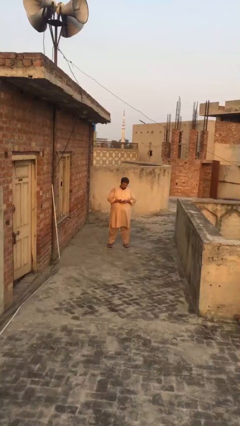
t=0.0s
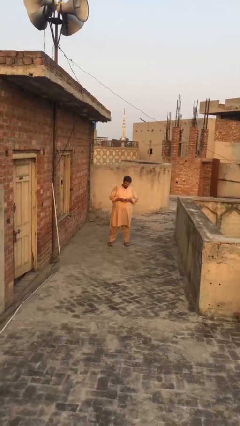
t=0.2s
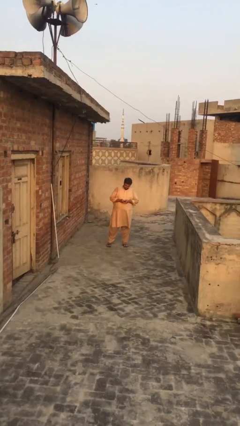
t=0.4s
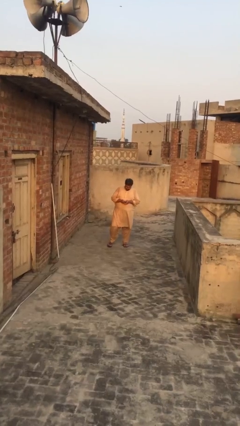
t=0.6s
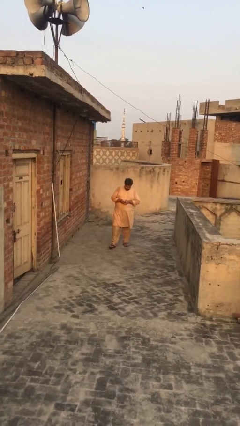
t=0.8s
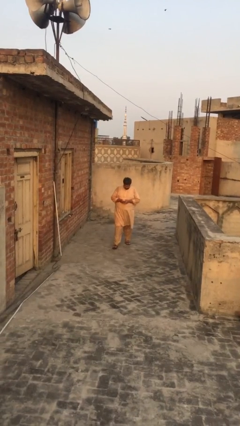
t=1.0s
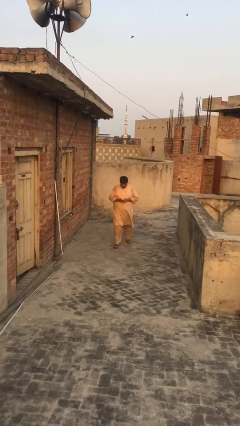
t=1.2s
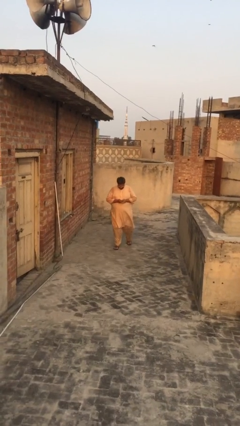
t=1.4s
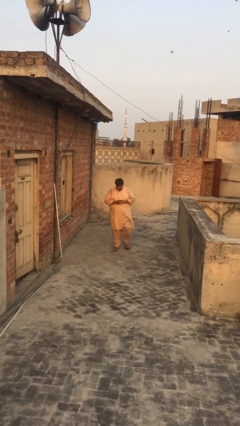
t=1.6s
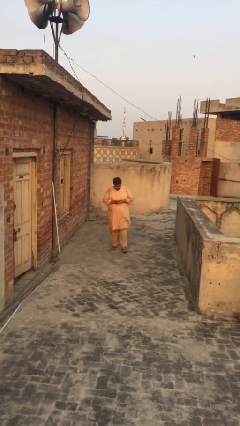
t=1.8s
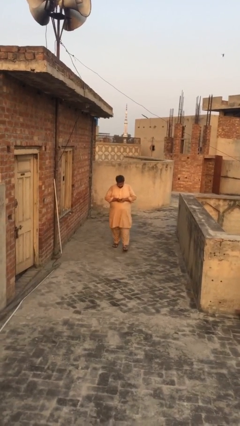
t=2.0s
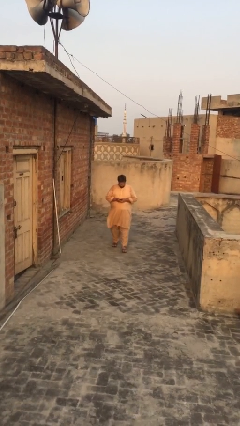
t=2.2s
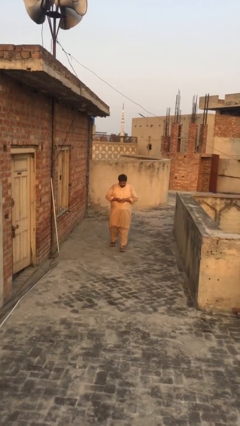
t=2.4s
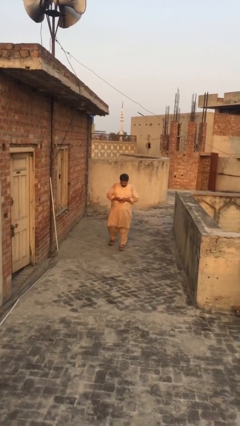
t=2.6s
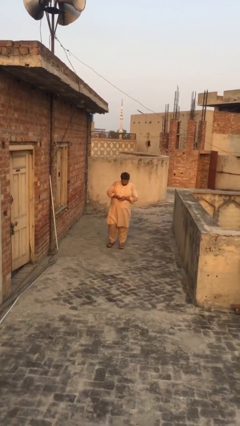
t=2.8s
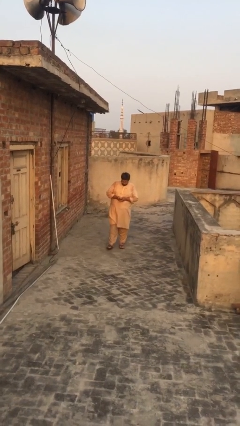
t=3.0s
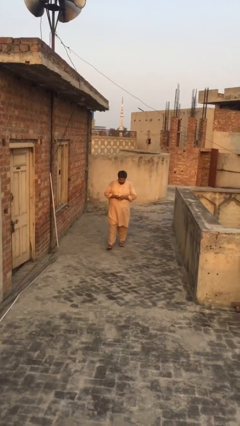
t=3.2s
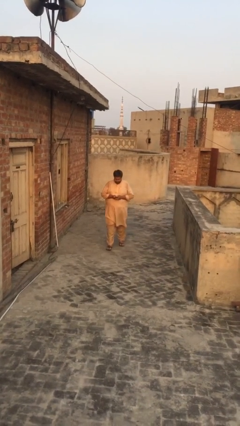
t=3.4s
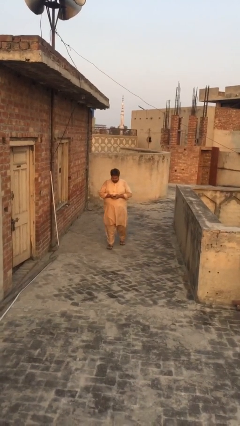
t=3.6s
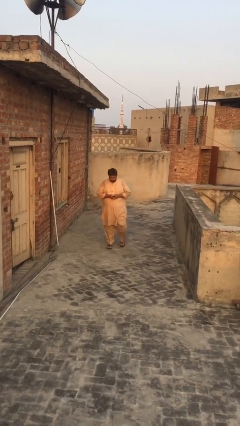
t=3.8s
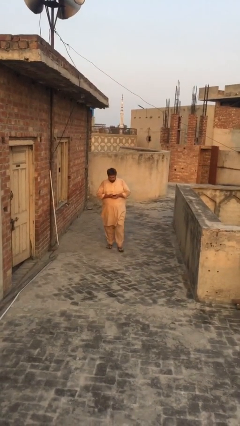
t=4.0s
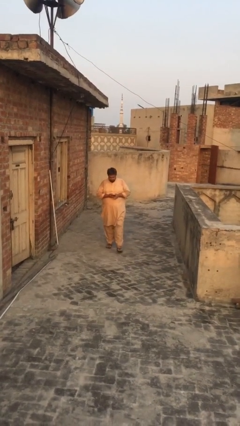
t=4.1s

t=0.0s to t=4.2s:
person texts on phone

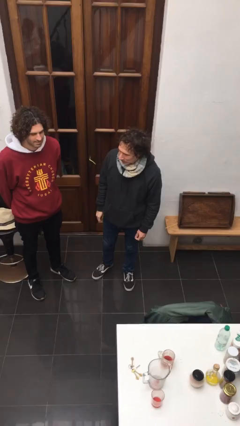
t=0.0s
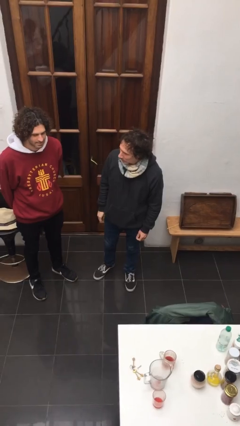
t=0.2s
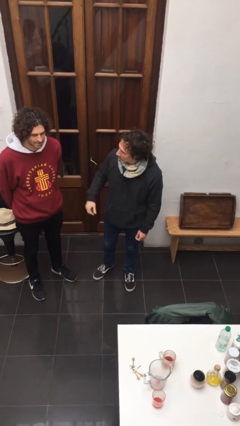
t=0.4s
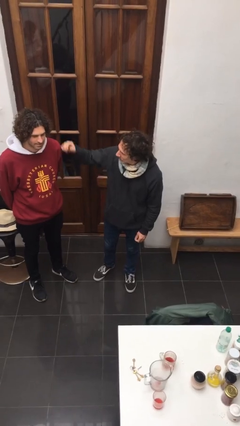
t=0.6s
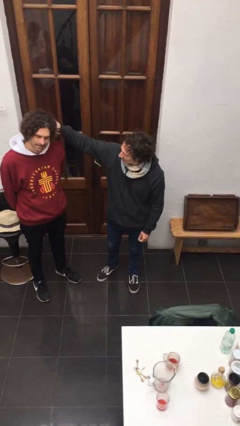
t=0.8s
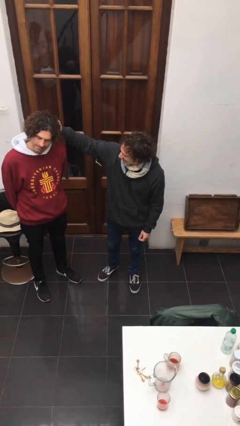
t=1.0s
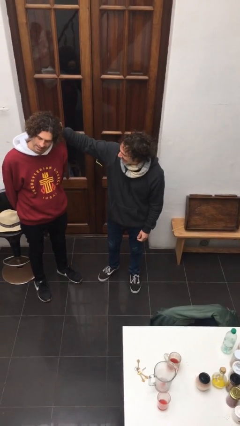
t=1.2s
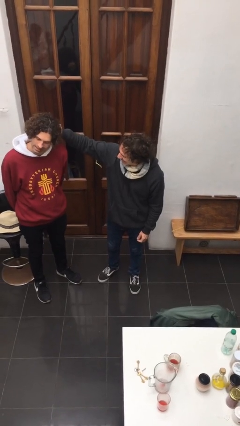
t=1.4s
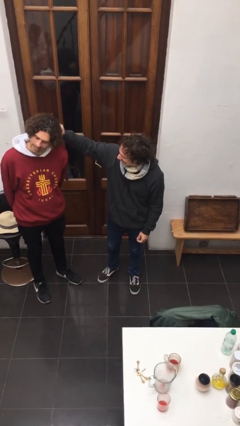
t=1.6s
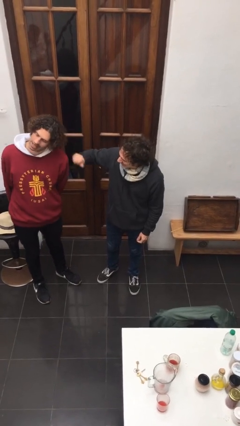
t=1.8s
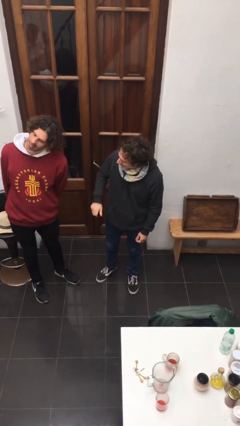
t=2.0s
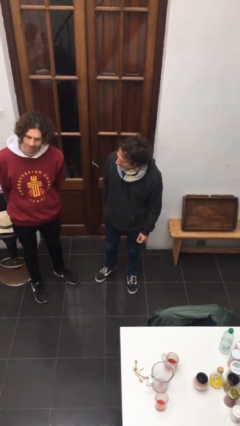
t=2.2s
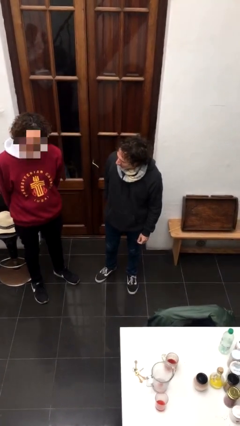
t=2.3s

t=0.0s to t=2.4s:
person grabs person by hair

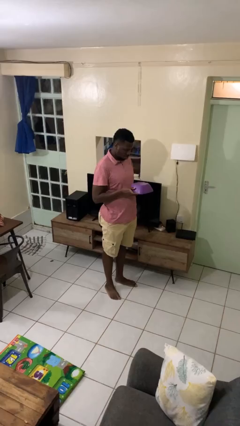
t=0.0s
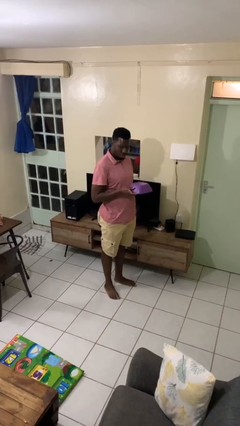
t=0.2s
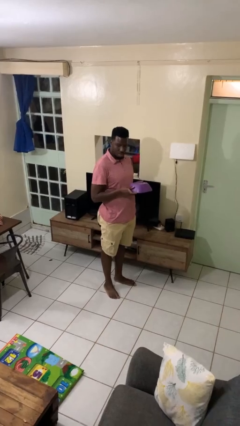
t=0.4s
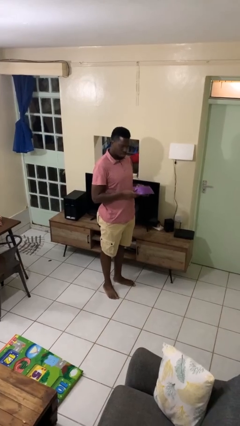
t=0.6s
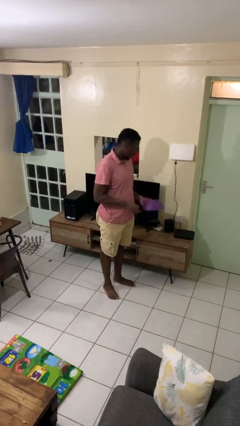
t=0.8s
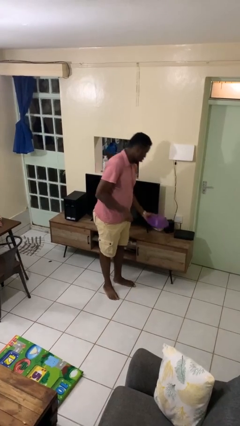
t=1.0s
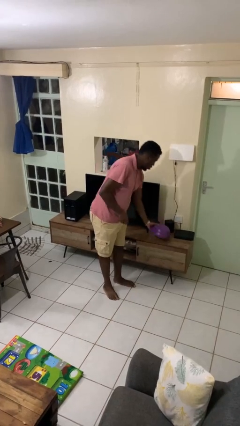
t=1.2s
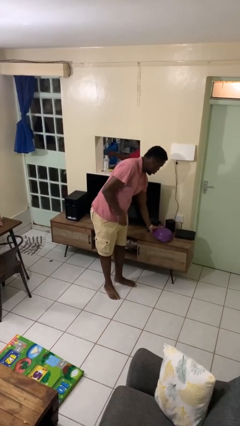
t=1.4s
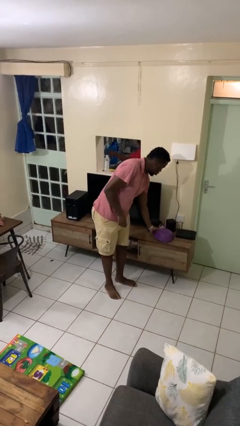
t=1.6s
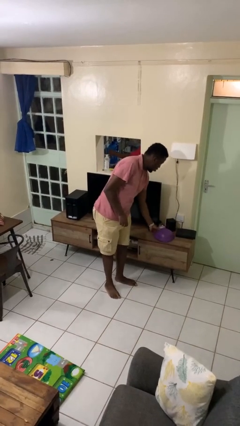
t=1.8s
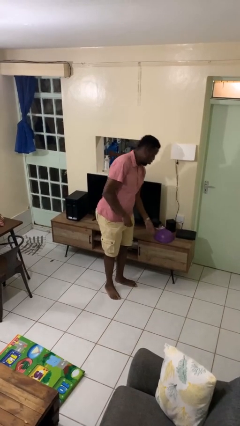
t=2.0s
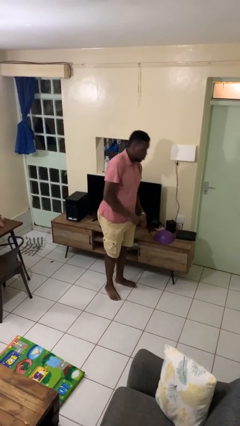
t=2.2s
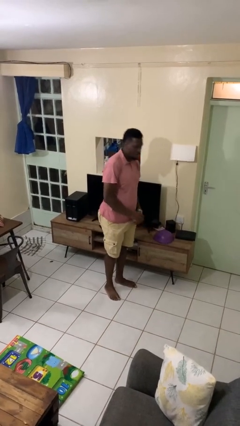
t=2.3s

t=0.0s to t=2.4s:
person puts down object on countertop

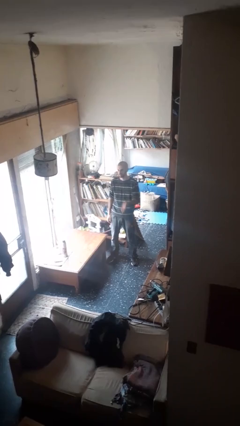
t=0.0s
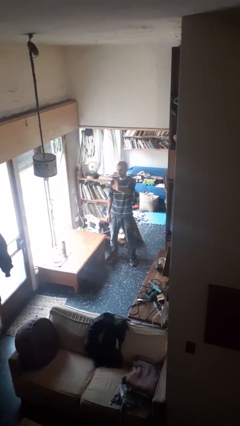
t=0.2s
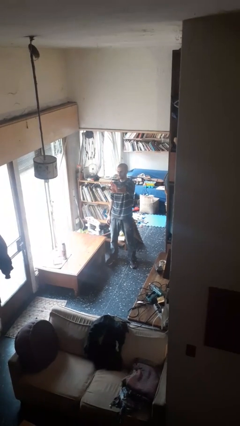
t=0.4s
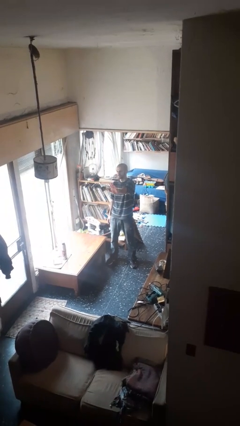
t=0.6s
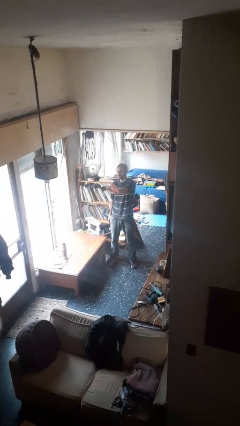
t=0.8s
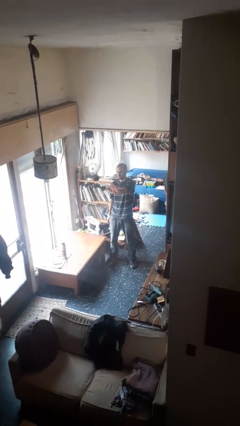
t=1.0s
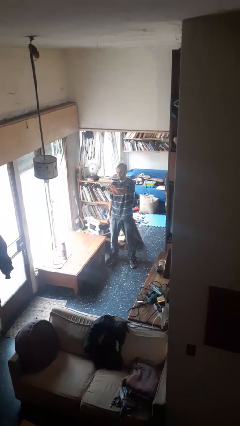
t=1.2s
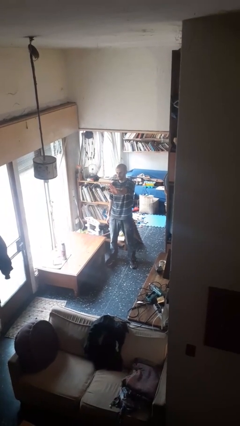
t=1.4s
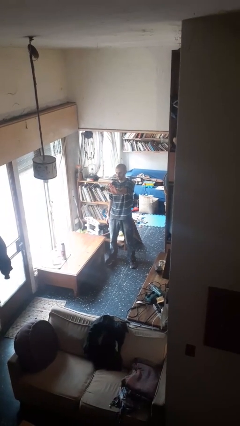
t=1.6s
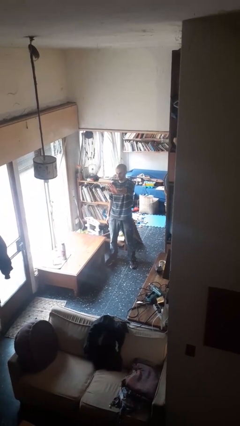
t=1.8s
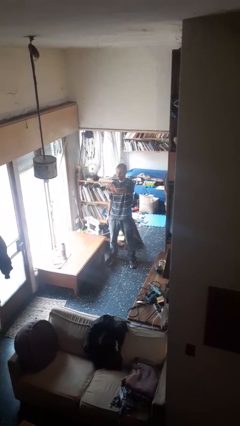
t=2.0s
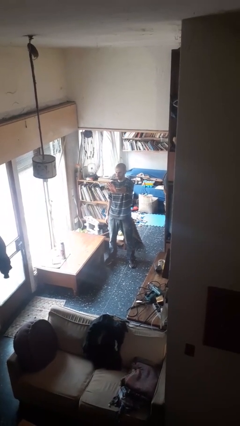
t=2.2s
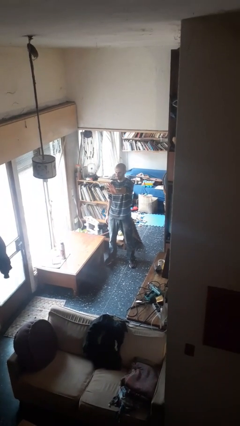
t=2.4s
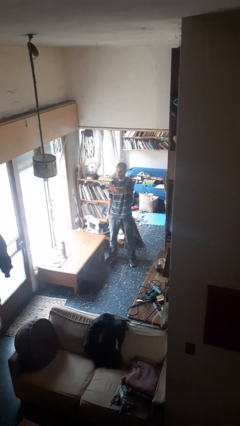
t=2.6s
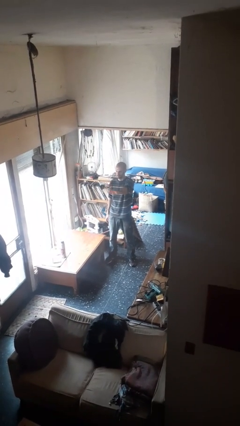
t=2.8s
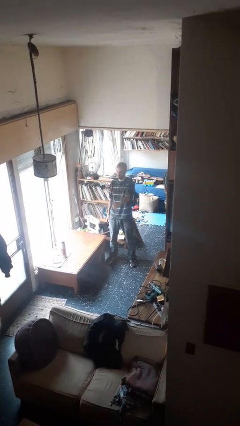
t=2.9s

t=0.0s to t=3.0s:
person gestures stop

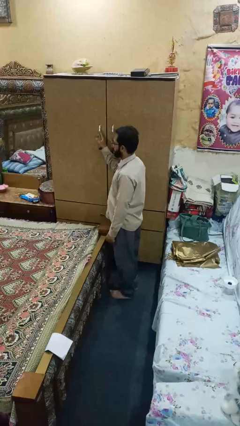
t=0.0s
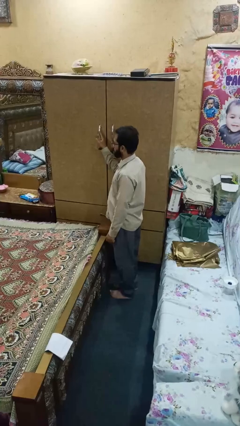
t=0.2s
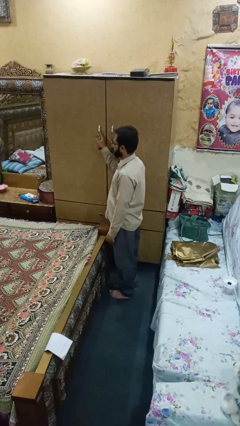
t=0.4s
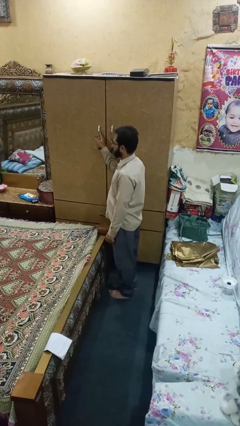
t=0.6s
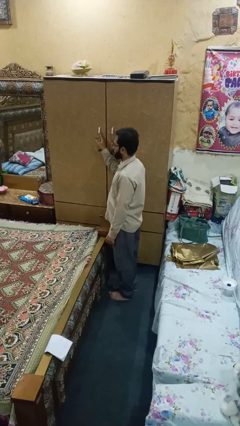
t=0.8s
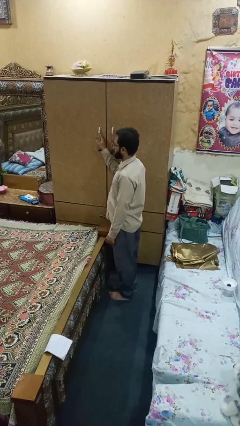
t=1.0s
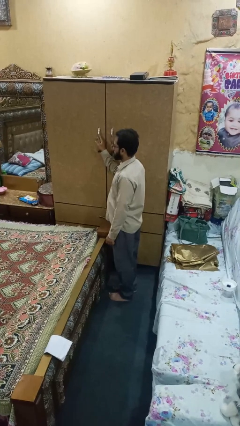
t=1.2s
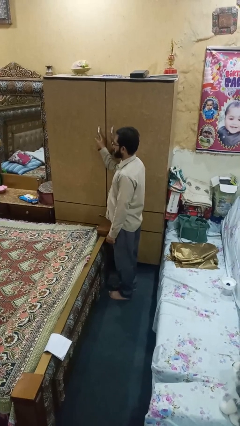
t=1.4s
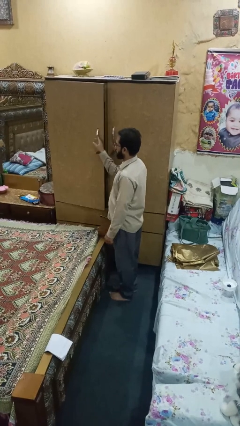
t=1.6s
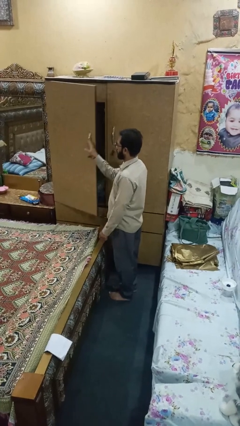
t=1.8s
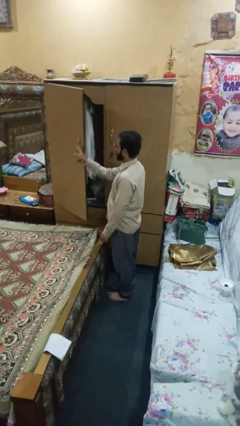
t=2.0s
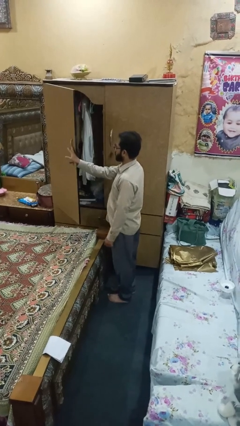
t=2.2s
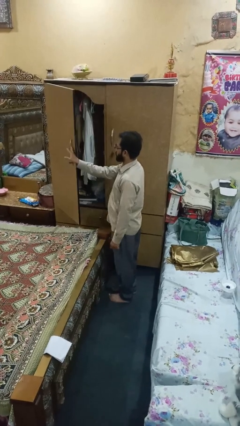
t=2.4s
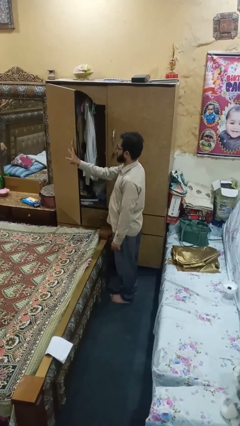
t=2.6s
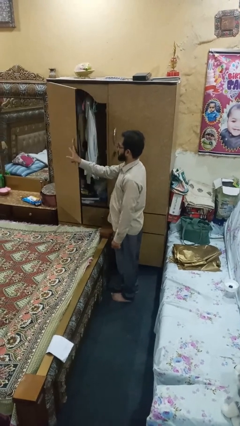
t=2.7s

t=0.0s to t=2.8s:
person opens closet door

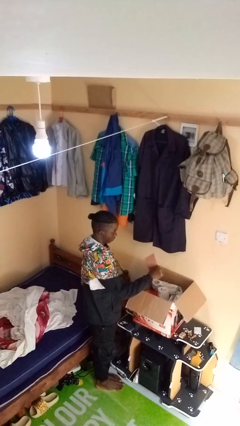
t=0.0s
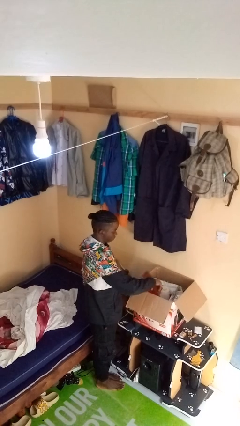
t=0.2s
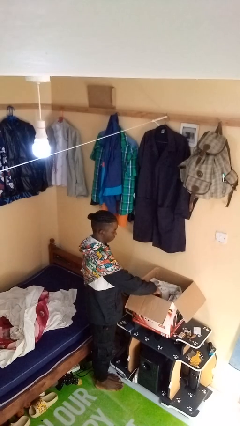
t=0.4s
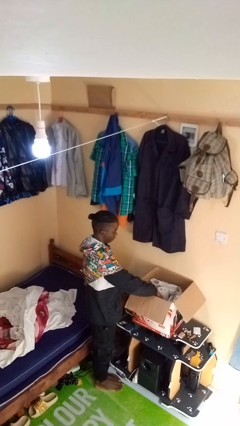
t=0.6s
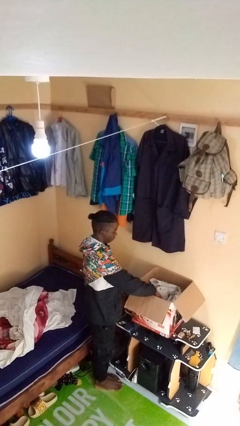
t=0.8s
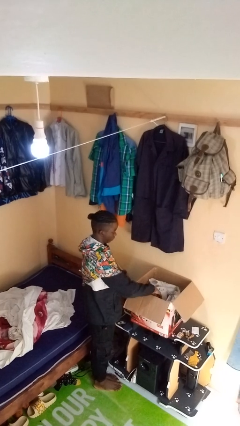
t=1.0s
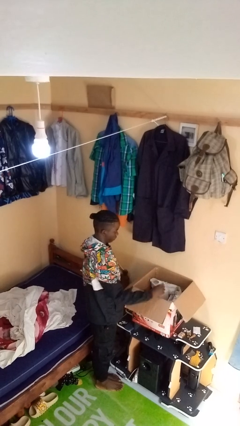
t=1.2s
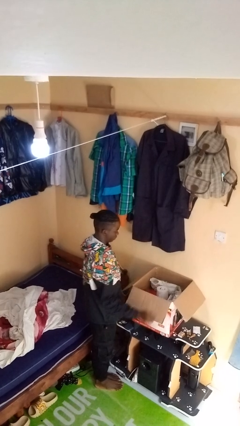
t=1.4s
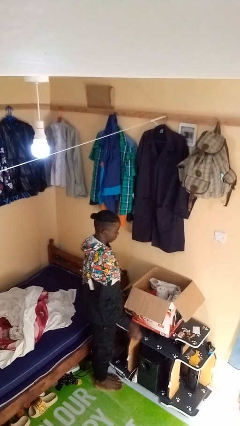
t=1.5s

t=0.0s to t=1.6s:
person puts object into box

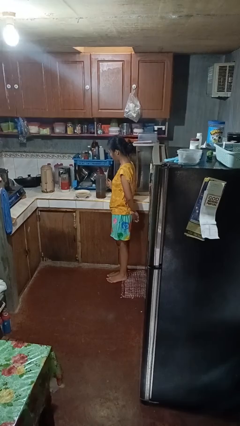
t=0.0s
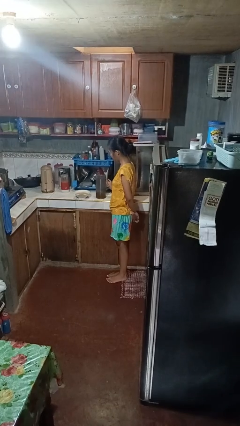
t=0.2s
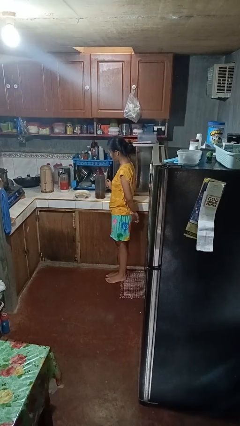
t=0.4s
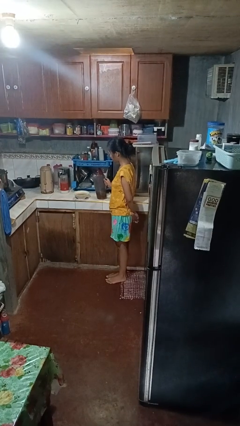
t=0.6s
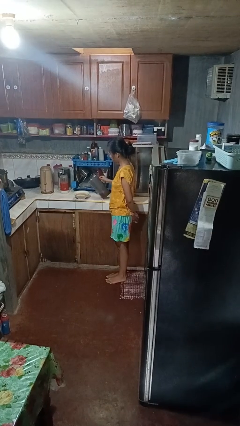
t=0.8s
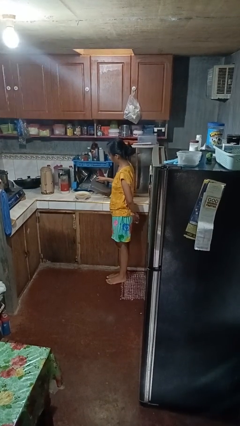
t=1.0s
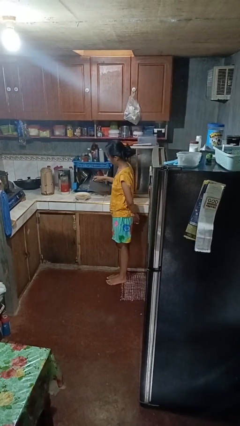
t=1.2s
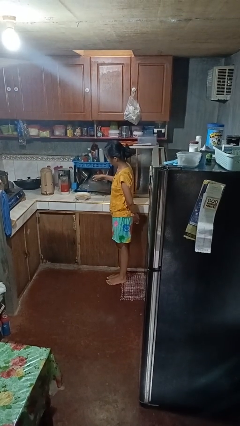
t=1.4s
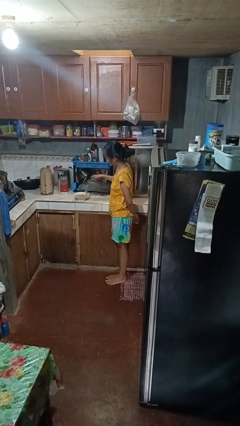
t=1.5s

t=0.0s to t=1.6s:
person pours into bowl
